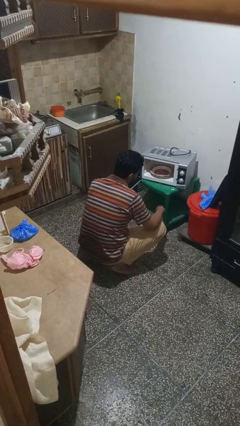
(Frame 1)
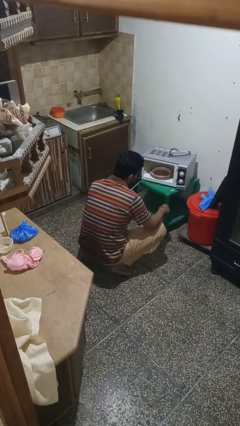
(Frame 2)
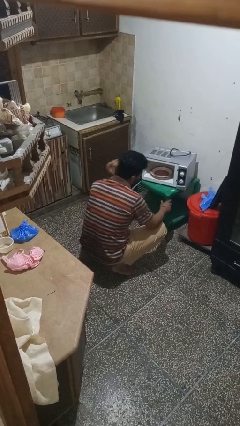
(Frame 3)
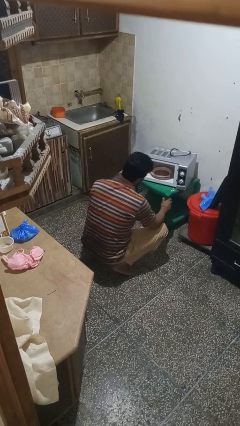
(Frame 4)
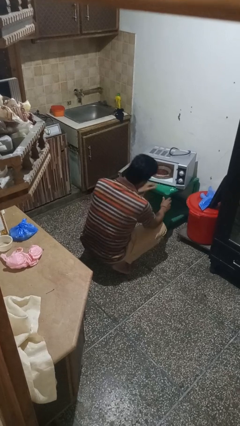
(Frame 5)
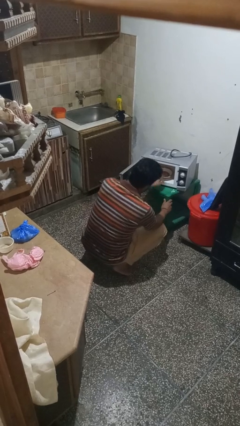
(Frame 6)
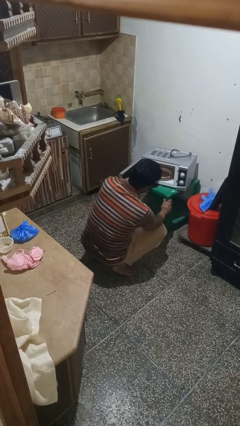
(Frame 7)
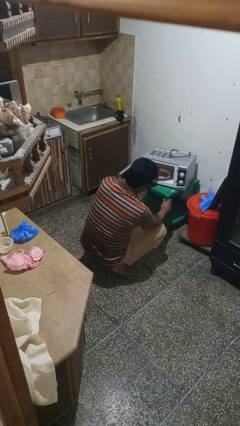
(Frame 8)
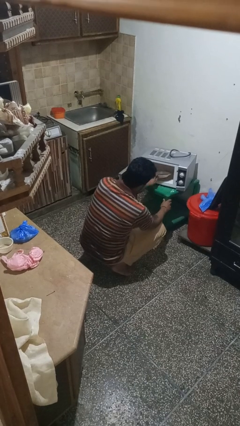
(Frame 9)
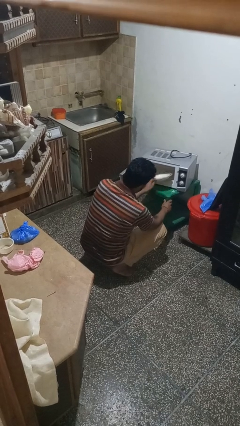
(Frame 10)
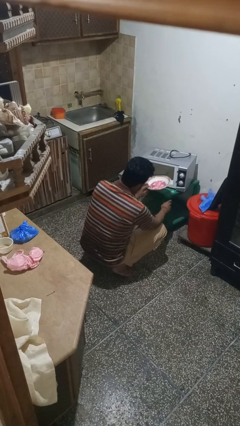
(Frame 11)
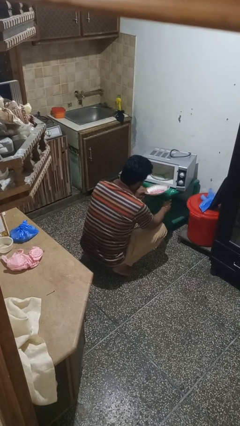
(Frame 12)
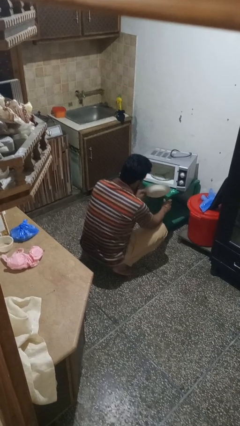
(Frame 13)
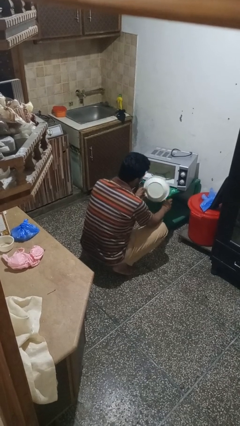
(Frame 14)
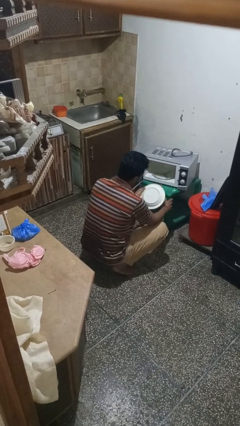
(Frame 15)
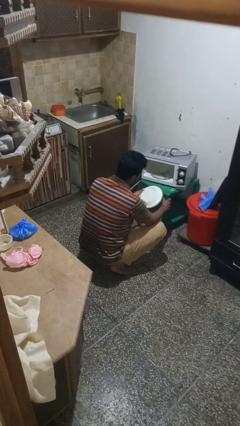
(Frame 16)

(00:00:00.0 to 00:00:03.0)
person takes object from microwave

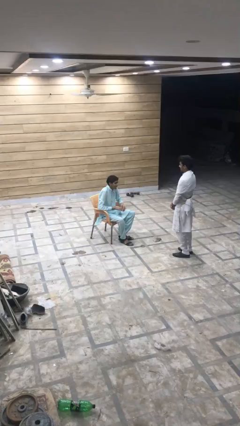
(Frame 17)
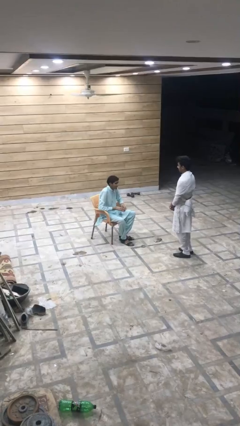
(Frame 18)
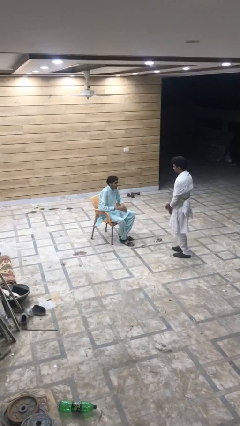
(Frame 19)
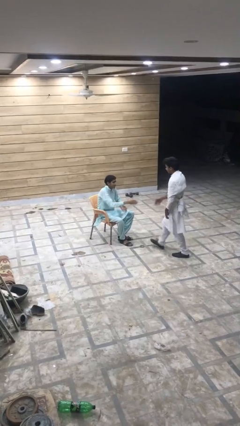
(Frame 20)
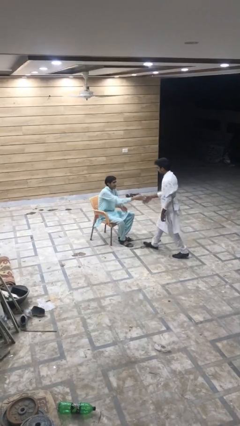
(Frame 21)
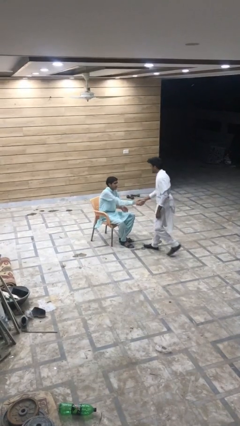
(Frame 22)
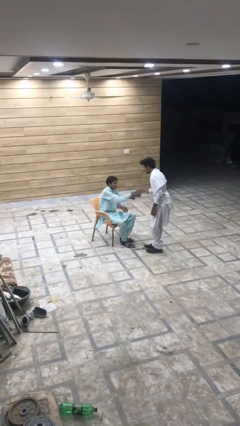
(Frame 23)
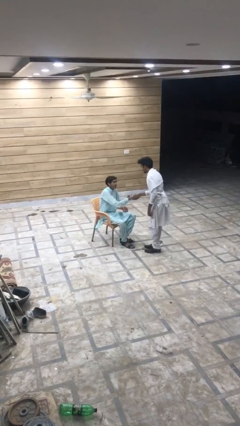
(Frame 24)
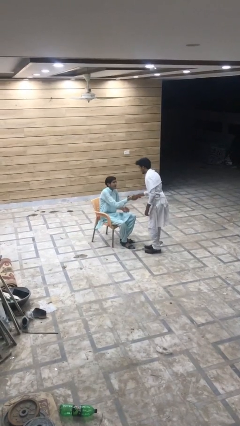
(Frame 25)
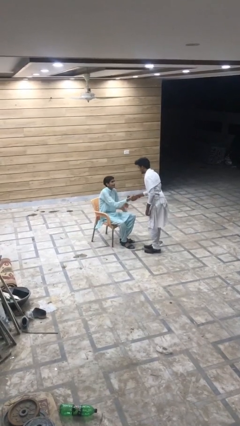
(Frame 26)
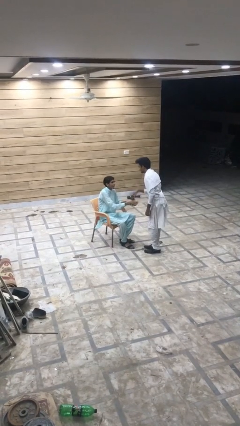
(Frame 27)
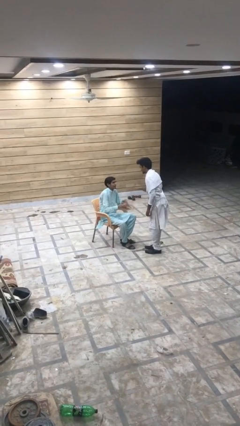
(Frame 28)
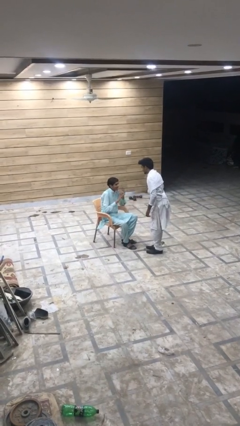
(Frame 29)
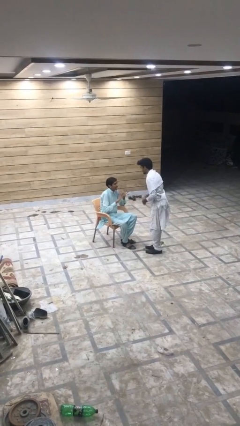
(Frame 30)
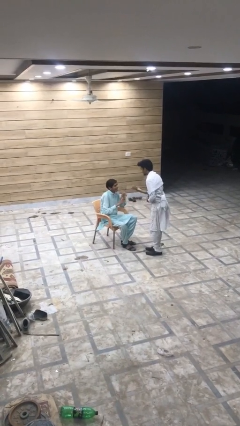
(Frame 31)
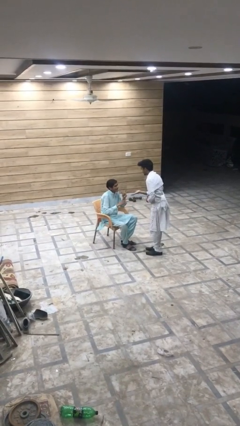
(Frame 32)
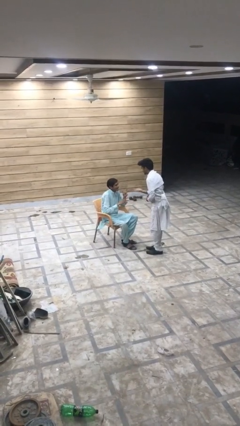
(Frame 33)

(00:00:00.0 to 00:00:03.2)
person shakes hand

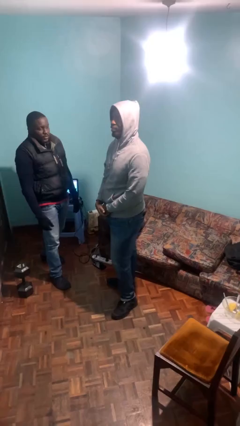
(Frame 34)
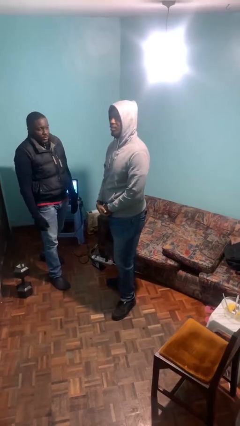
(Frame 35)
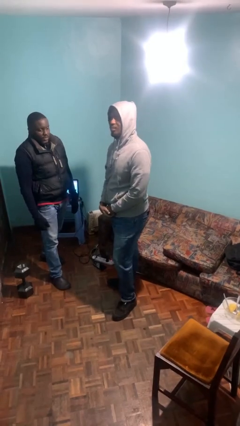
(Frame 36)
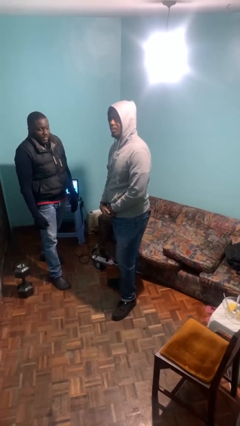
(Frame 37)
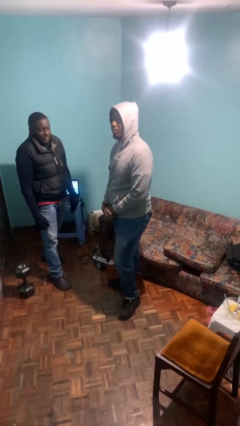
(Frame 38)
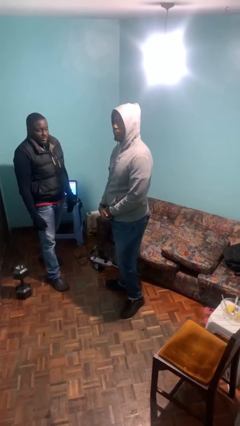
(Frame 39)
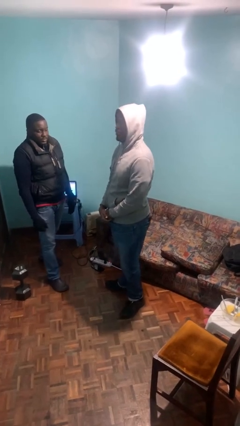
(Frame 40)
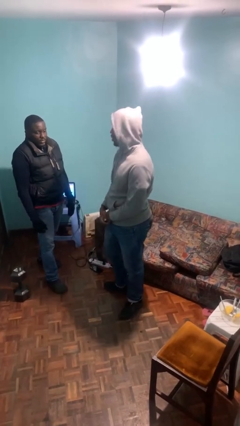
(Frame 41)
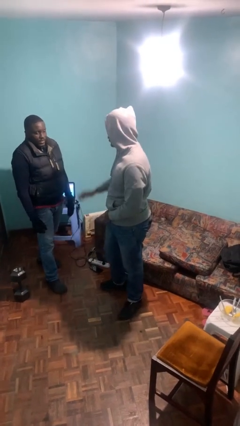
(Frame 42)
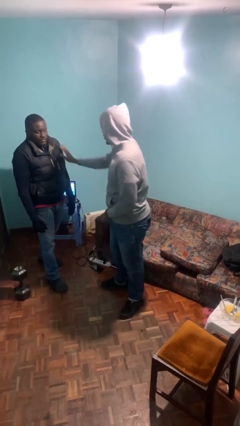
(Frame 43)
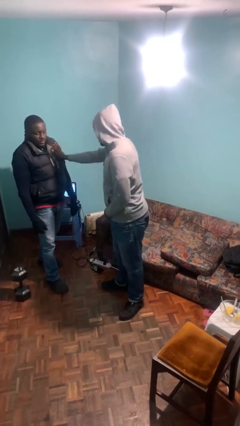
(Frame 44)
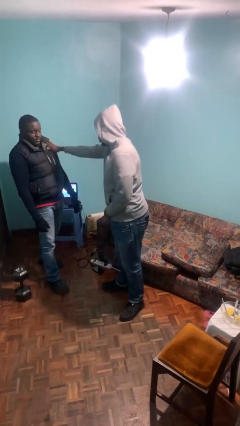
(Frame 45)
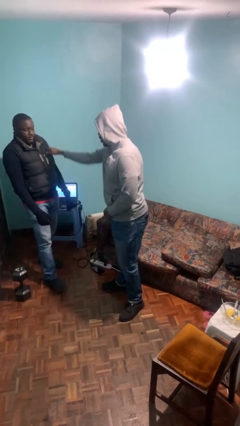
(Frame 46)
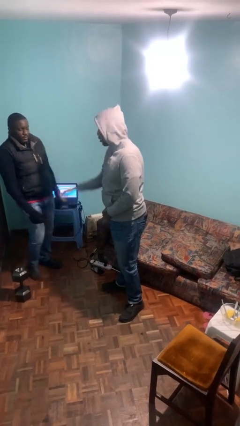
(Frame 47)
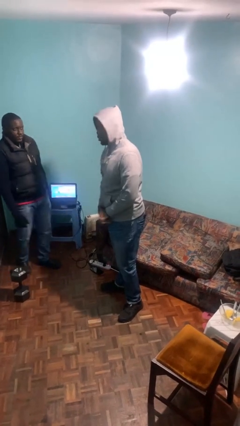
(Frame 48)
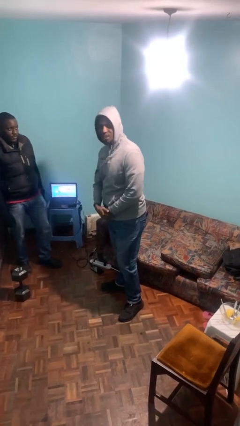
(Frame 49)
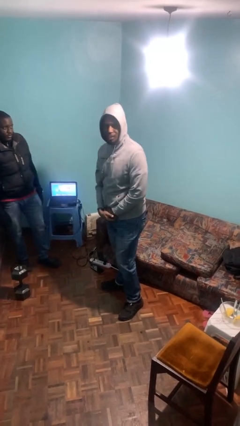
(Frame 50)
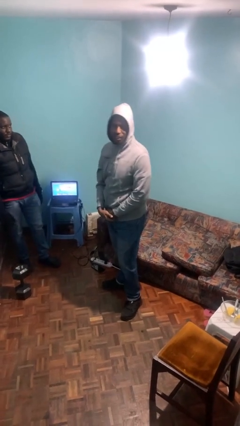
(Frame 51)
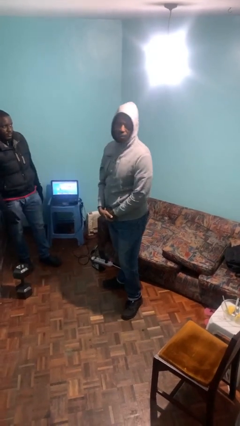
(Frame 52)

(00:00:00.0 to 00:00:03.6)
person shoves person

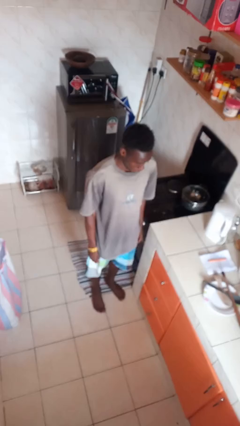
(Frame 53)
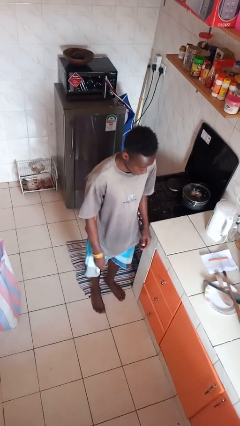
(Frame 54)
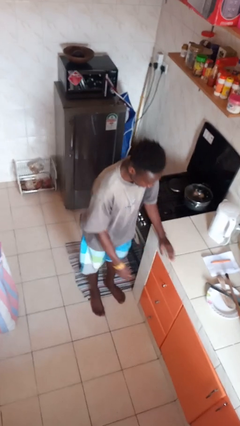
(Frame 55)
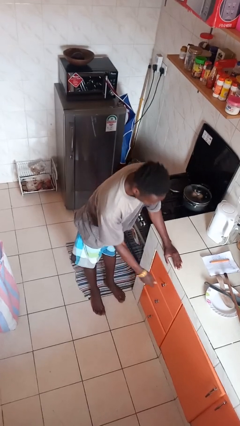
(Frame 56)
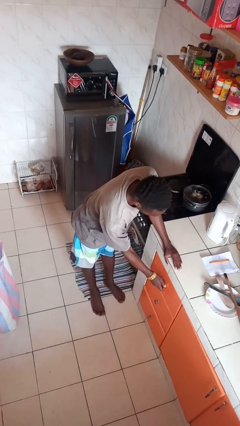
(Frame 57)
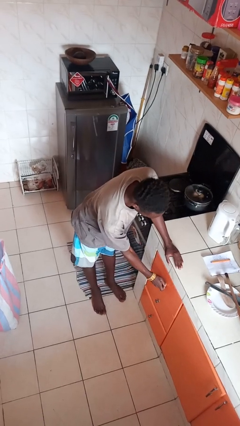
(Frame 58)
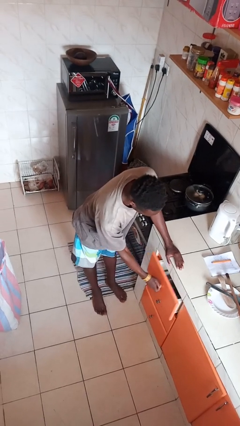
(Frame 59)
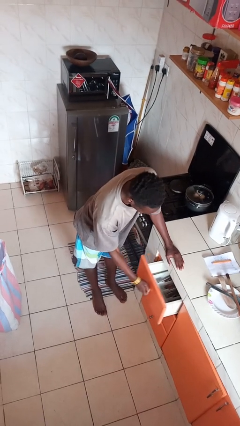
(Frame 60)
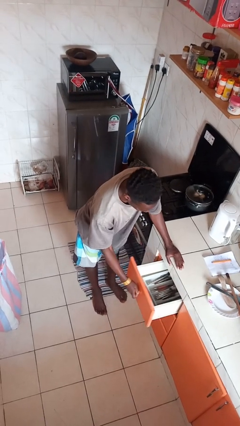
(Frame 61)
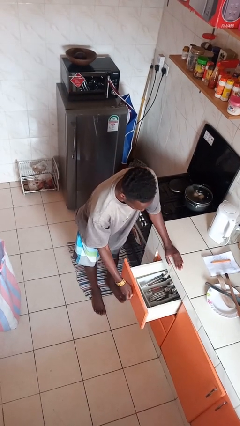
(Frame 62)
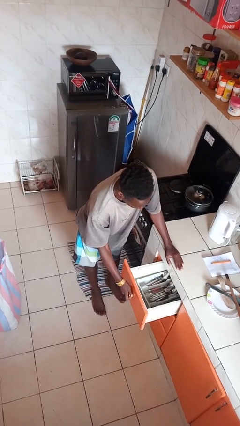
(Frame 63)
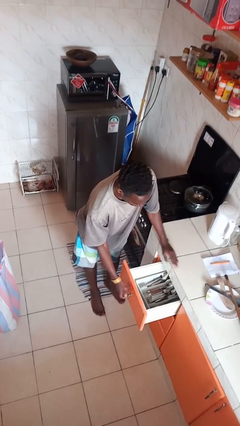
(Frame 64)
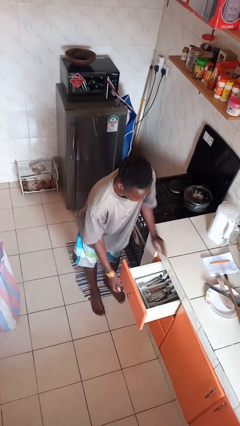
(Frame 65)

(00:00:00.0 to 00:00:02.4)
person opens kitchen drawer

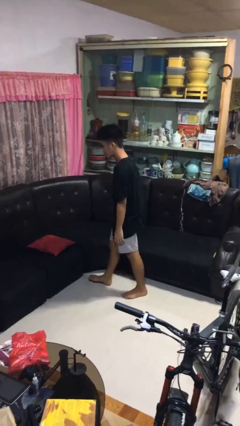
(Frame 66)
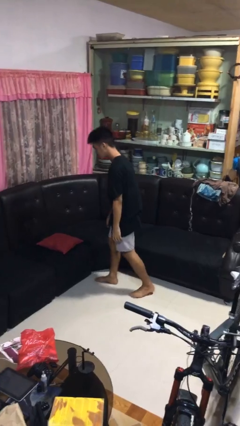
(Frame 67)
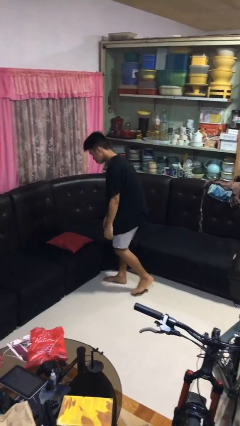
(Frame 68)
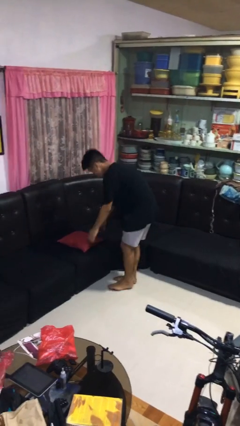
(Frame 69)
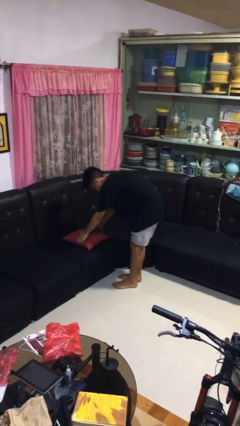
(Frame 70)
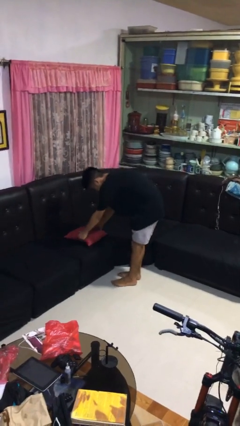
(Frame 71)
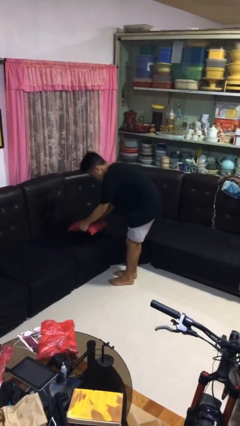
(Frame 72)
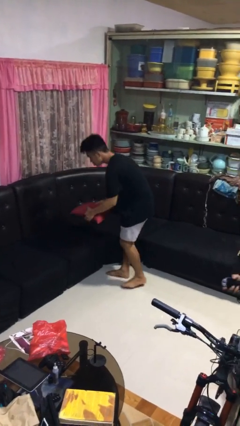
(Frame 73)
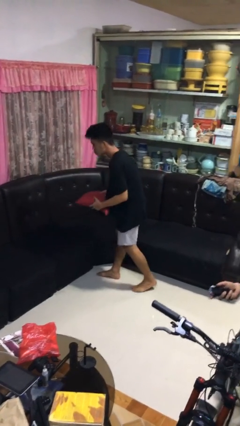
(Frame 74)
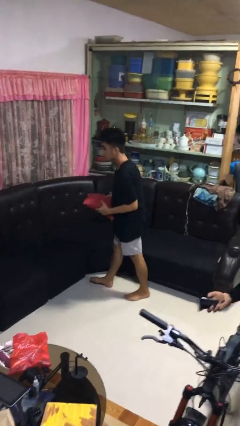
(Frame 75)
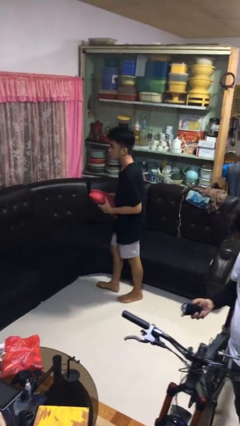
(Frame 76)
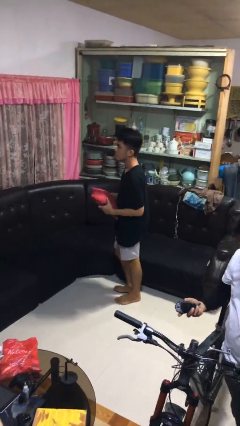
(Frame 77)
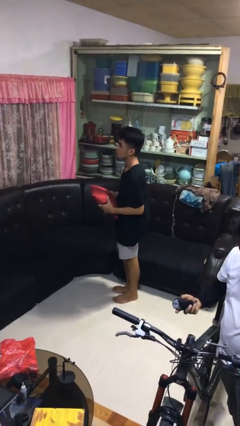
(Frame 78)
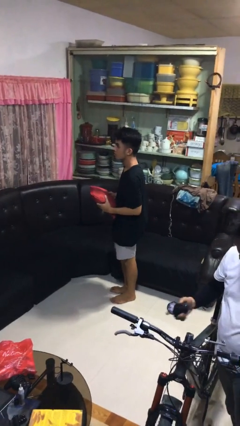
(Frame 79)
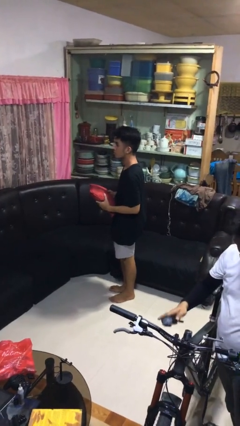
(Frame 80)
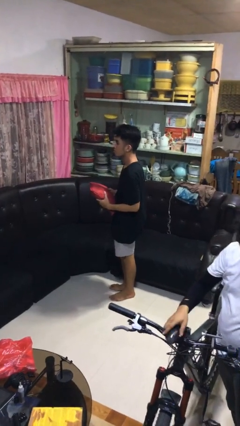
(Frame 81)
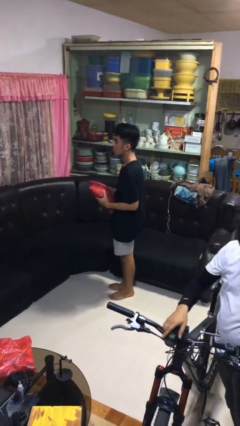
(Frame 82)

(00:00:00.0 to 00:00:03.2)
person picks up object from couch

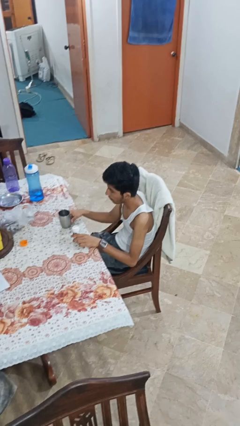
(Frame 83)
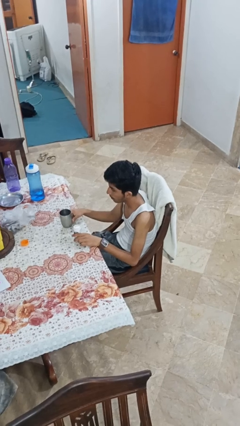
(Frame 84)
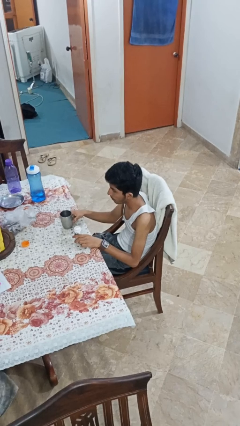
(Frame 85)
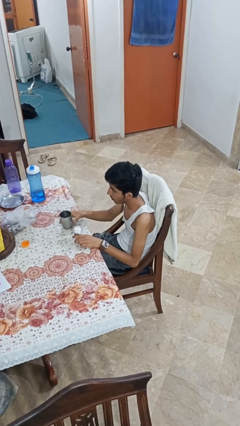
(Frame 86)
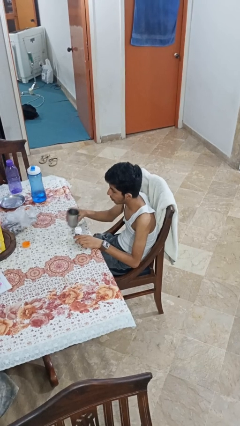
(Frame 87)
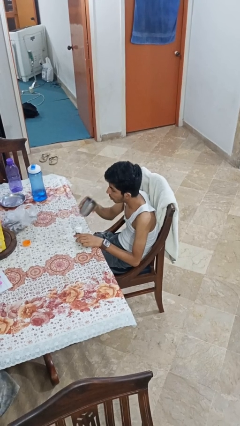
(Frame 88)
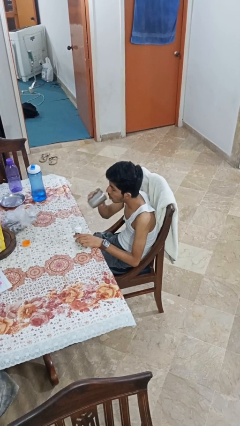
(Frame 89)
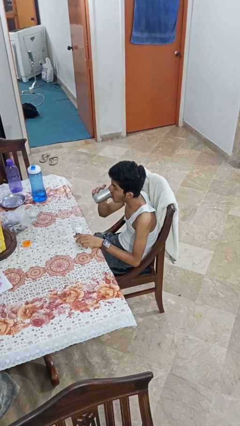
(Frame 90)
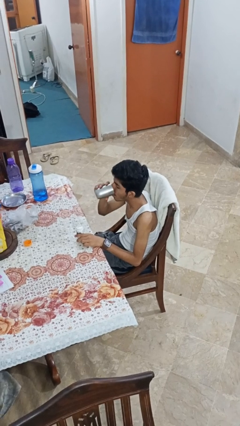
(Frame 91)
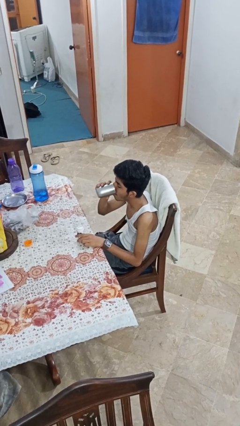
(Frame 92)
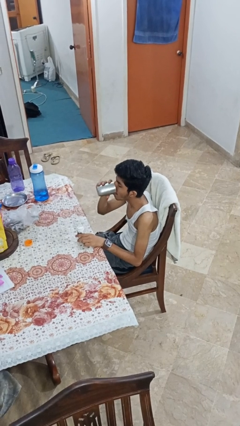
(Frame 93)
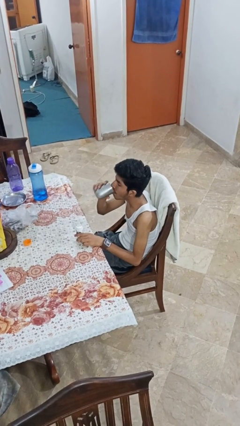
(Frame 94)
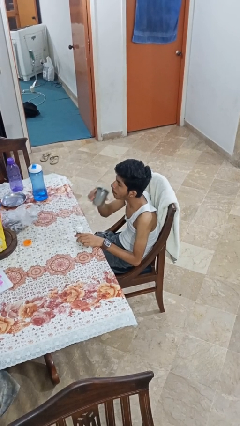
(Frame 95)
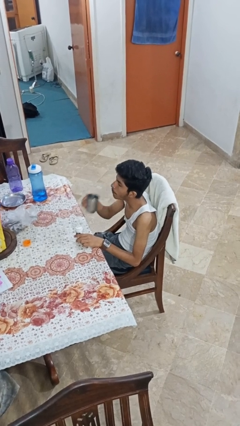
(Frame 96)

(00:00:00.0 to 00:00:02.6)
person drinks from cup
